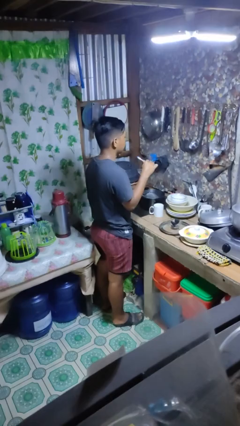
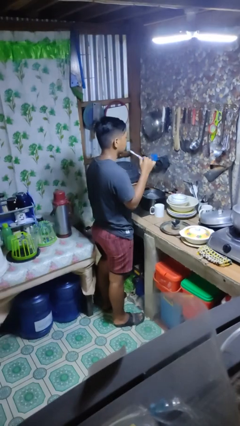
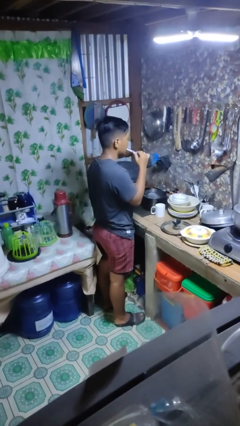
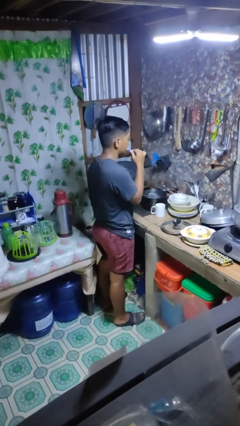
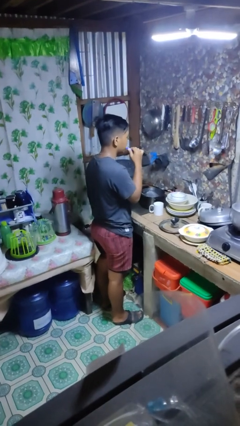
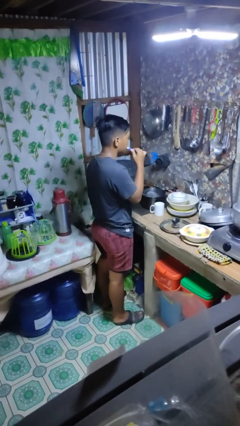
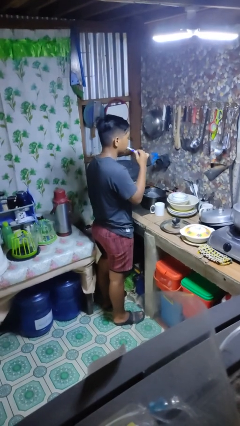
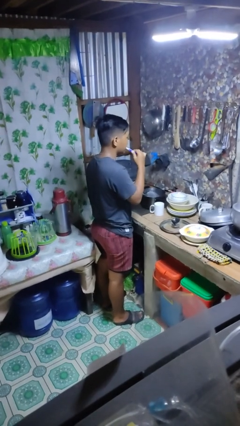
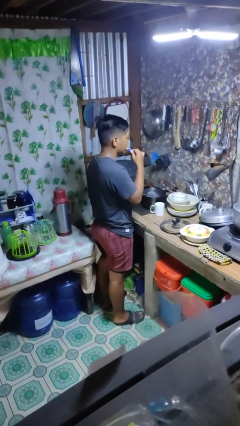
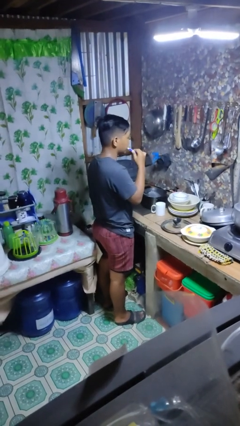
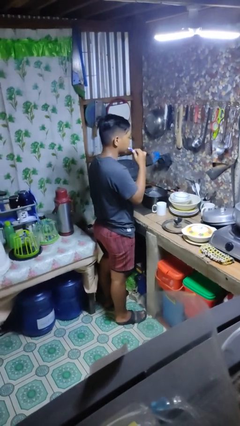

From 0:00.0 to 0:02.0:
person brushes teeth

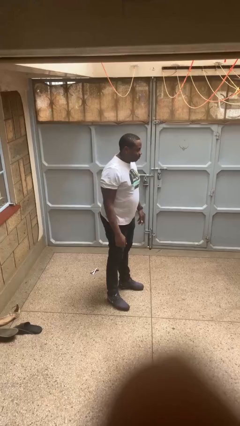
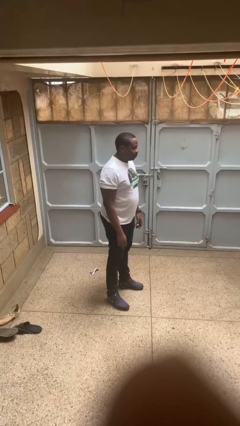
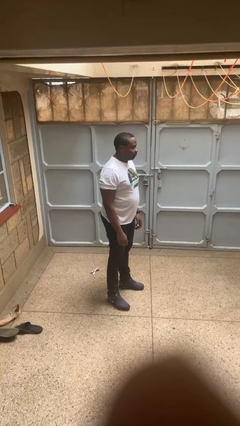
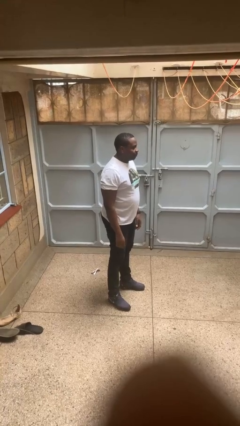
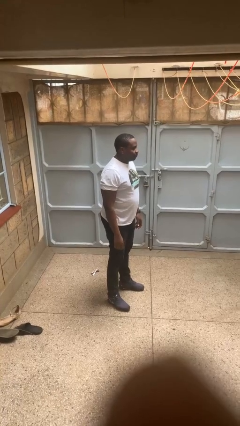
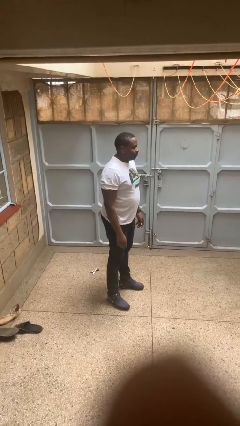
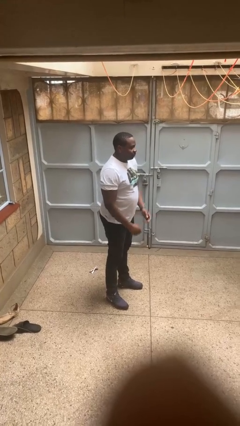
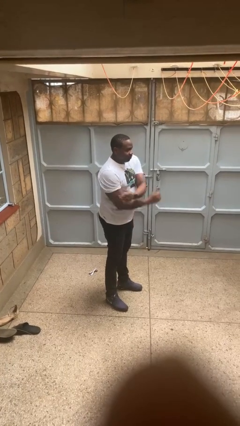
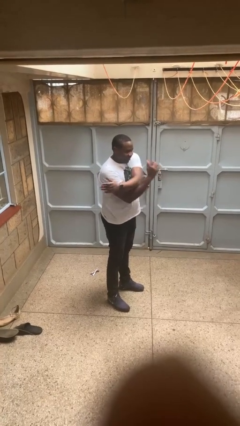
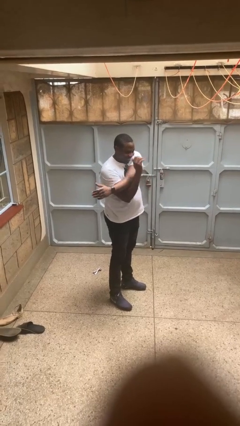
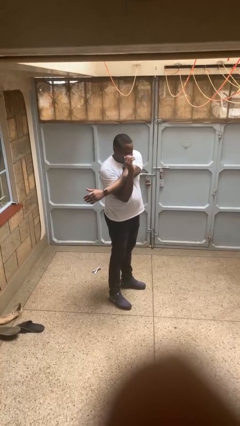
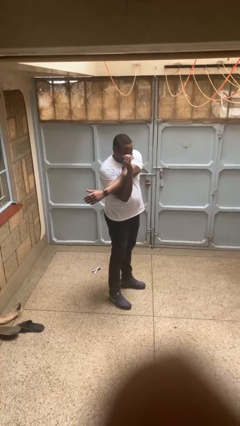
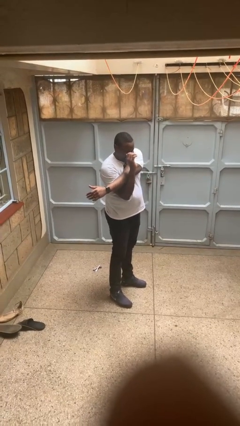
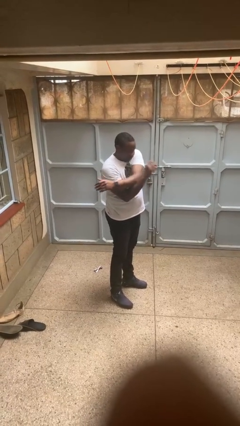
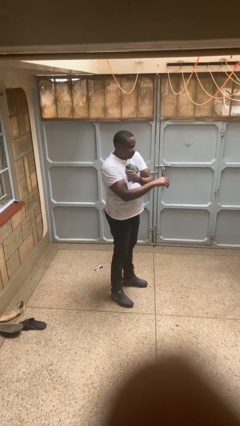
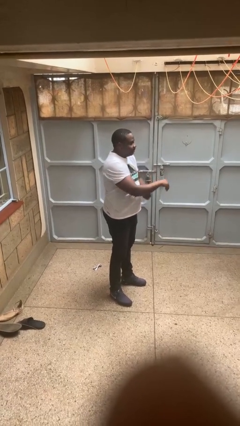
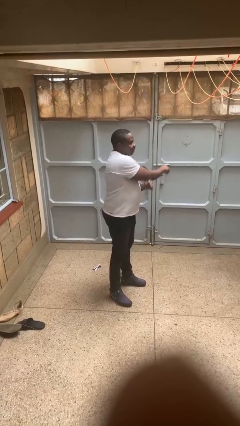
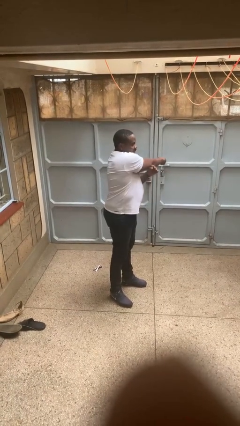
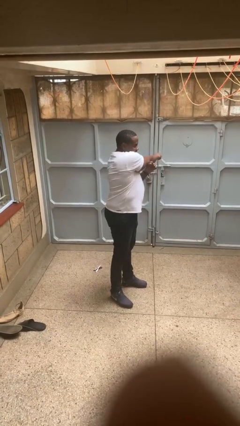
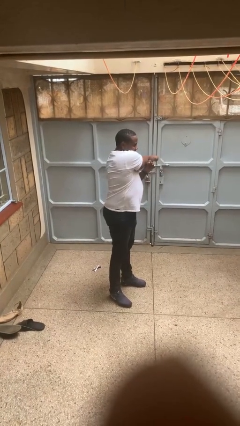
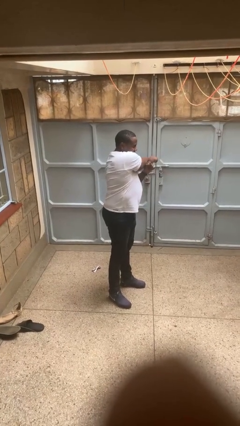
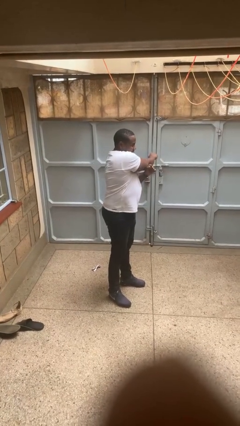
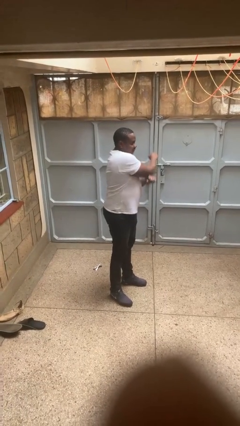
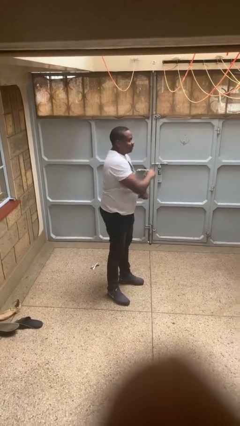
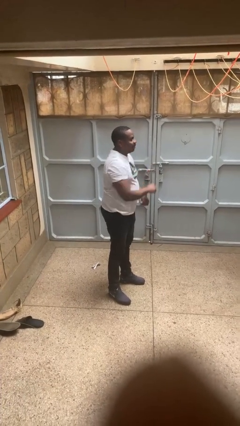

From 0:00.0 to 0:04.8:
person stretches arms to side

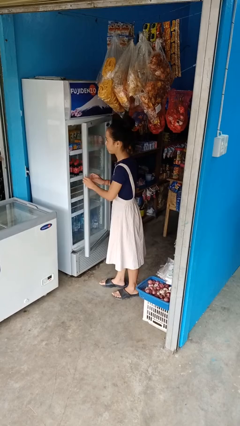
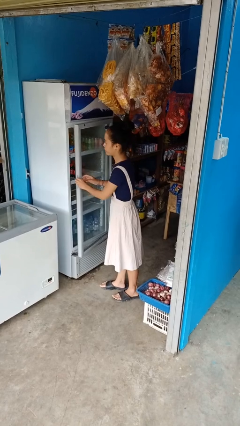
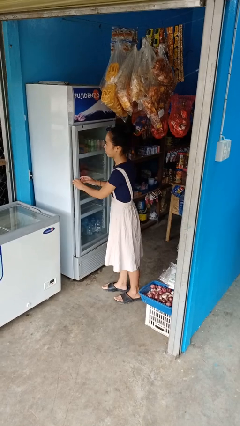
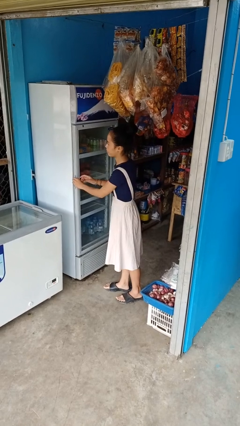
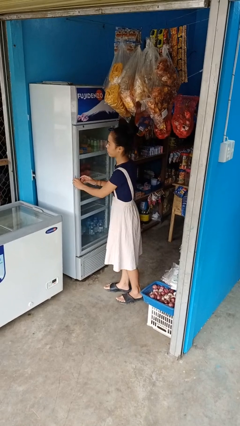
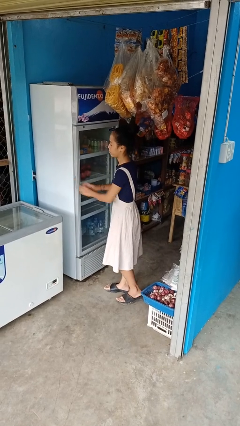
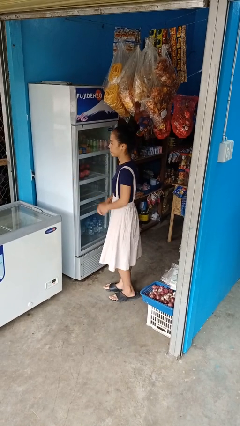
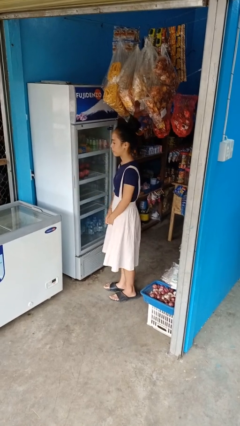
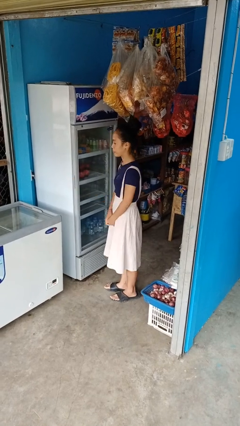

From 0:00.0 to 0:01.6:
person closes refrigerator

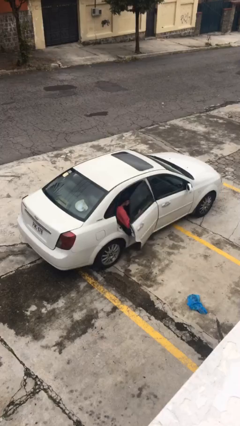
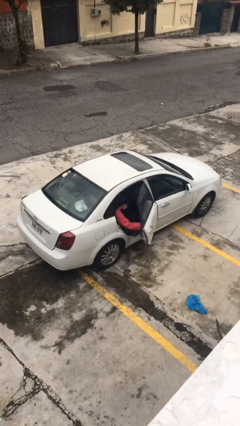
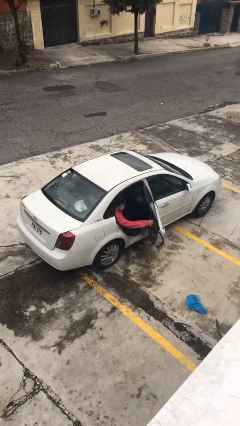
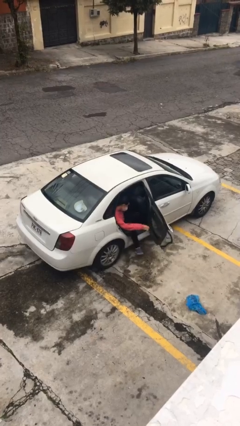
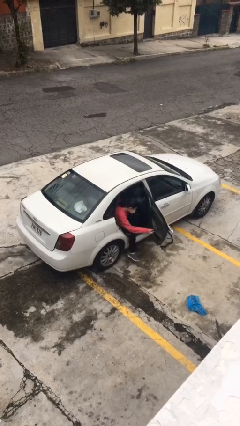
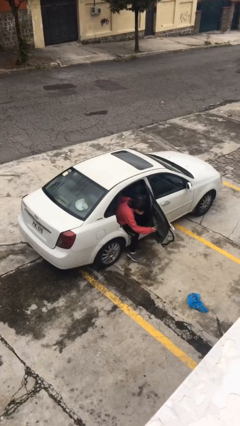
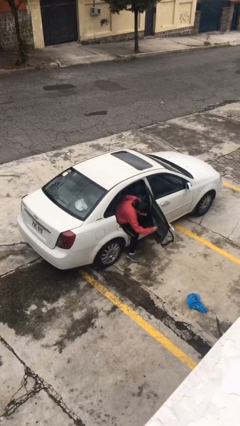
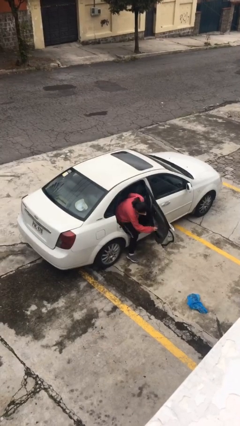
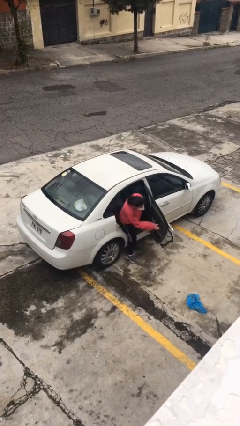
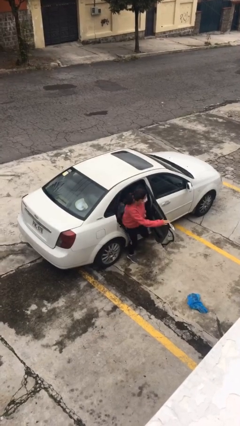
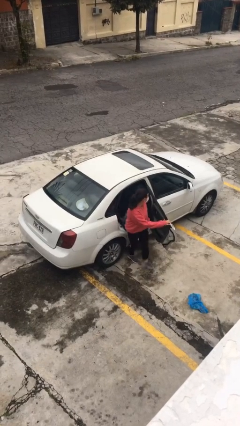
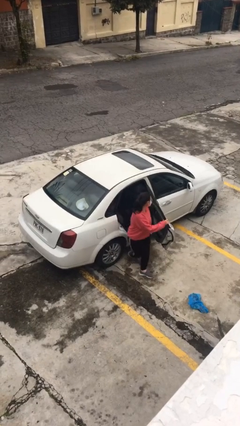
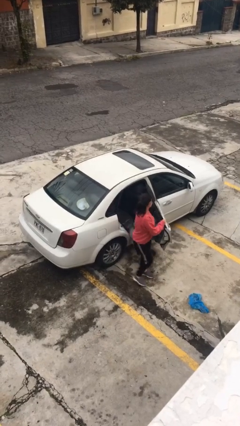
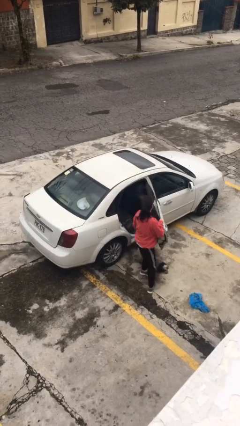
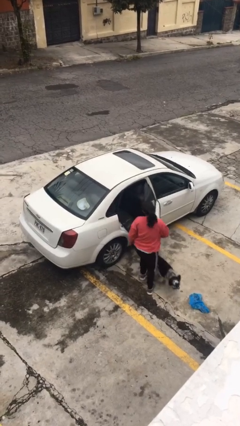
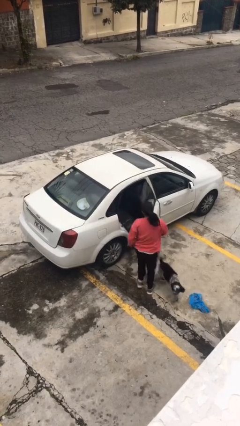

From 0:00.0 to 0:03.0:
car drops off person

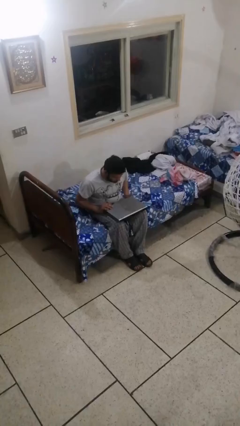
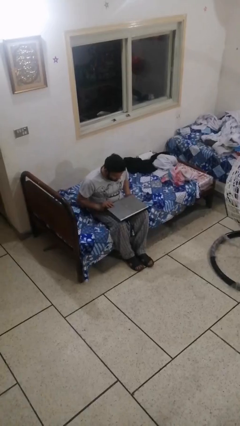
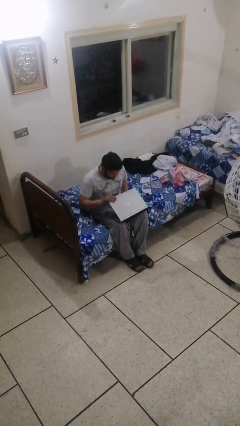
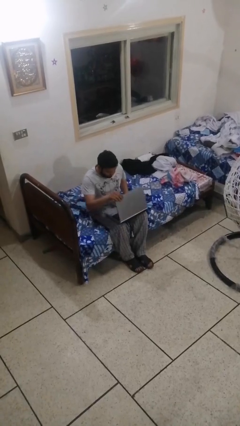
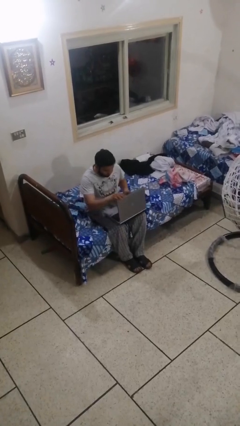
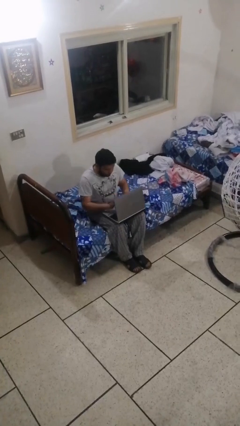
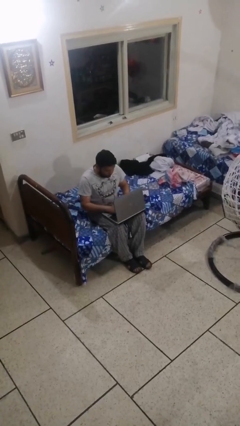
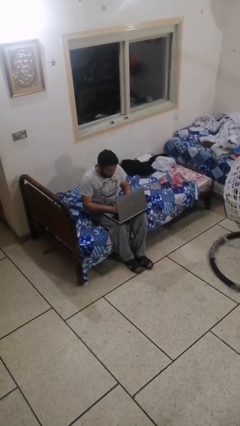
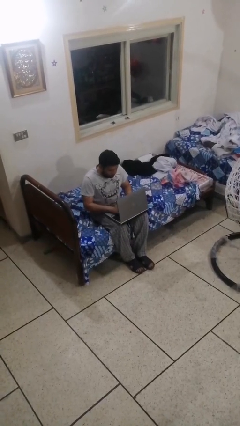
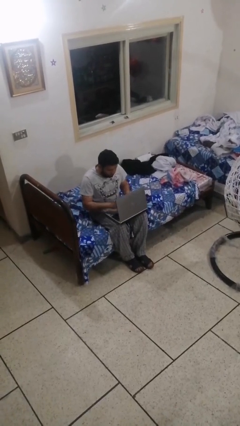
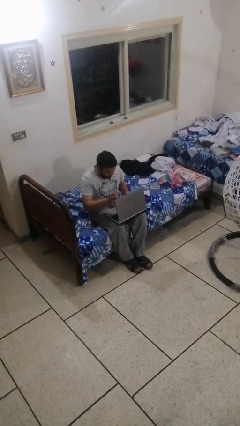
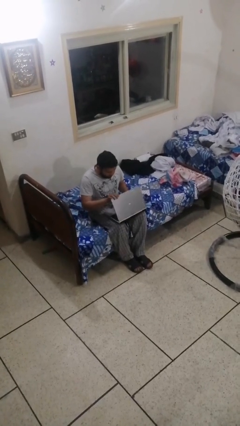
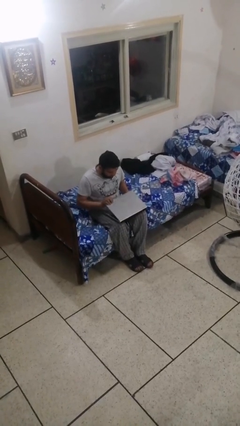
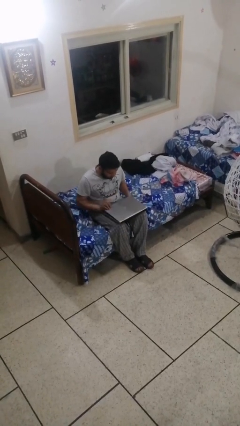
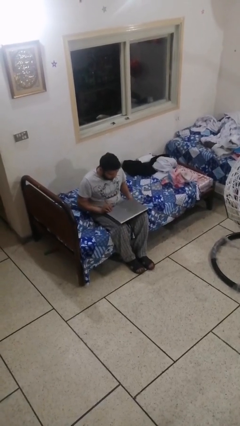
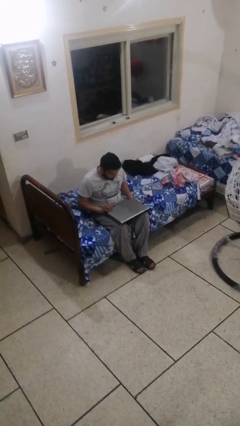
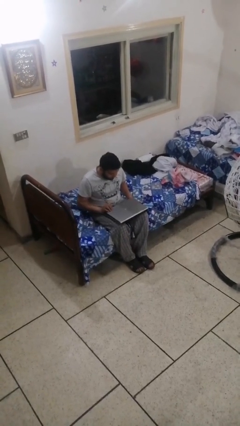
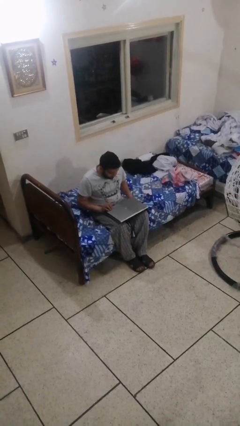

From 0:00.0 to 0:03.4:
person interacts with laptop

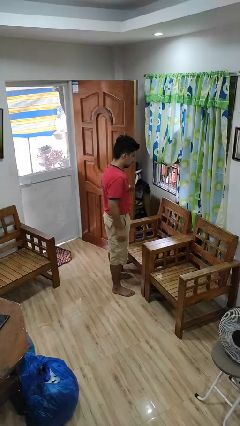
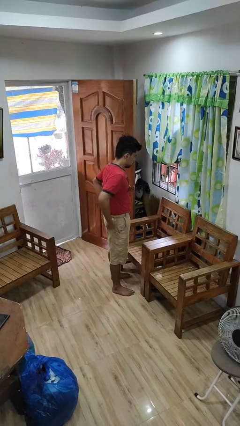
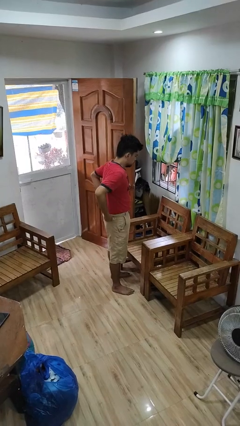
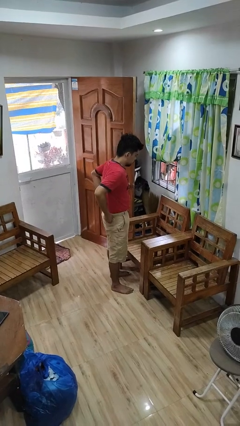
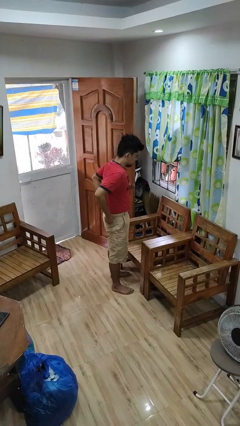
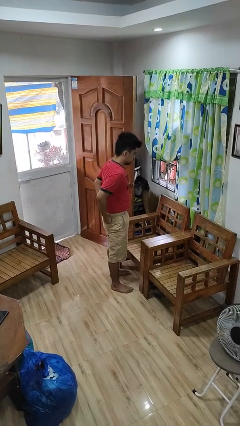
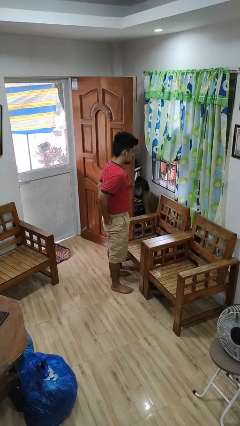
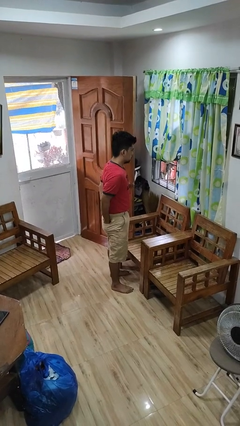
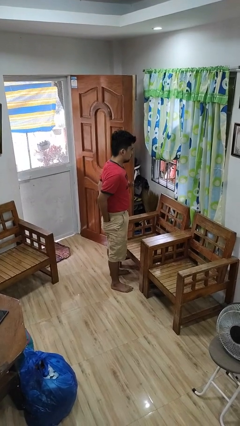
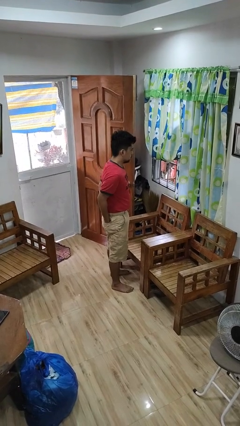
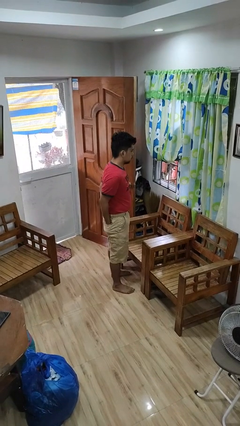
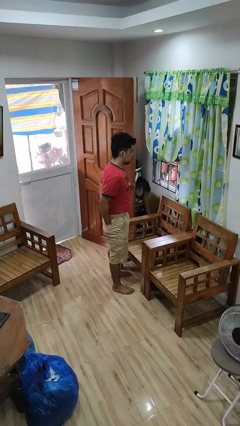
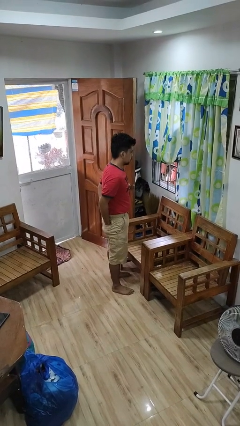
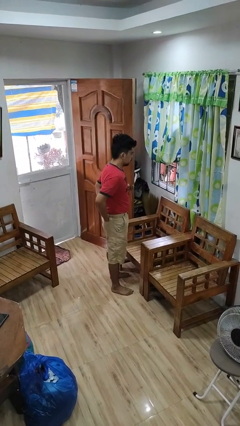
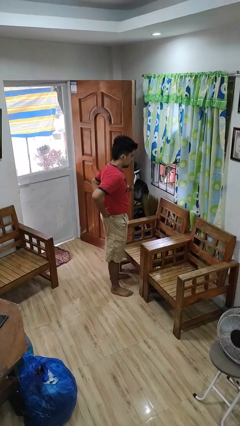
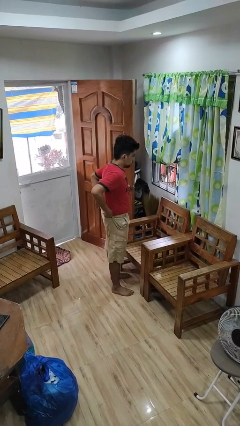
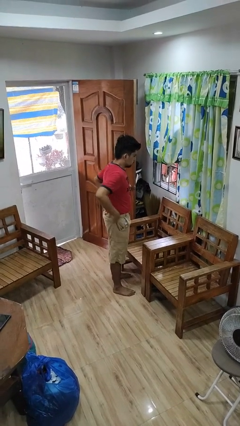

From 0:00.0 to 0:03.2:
person puts hands in back pockets
